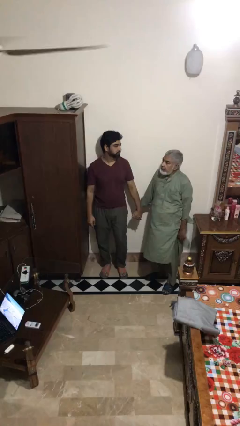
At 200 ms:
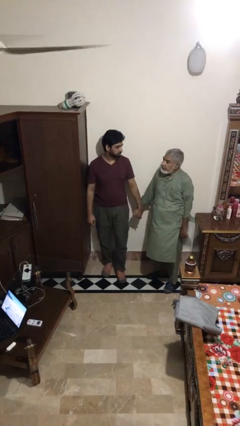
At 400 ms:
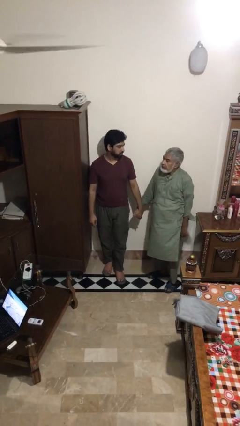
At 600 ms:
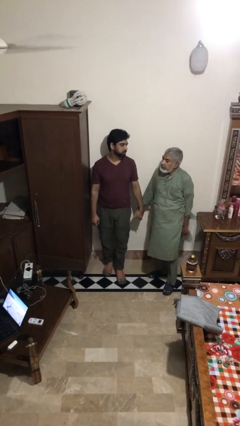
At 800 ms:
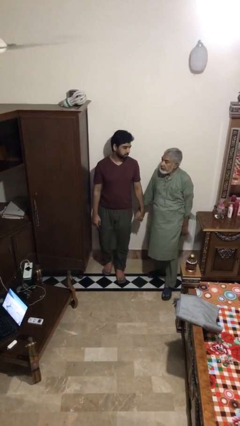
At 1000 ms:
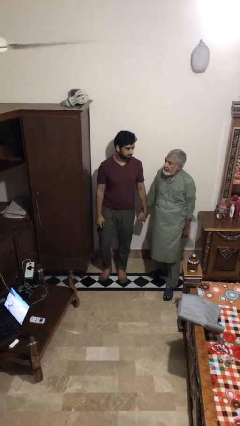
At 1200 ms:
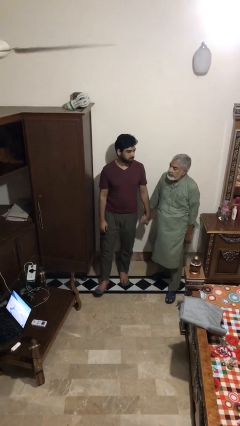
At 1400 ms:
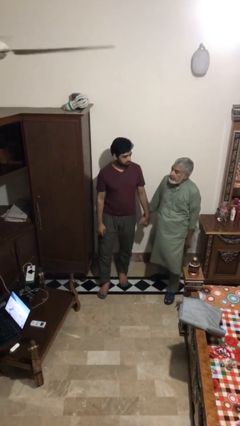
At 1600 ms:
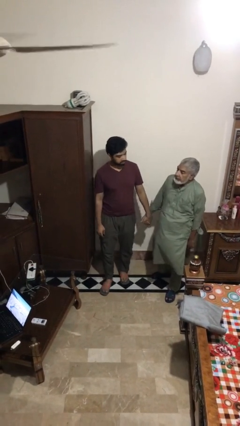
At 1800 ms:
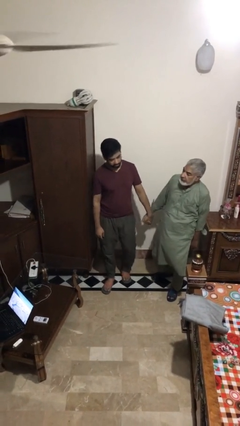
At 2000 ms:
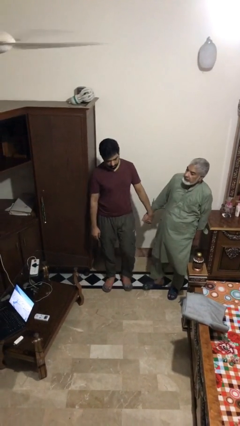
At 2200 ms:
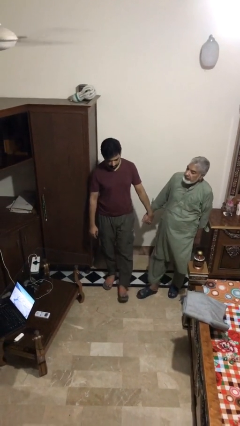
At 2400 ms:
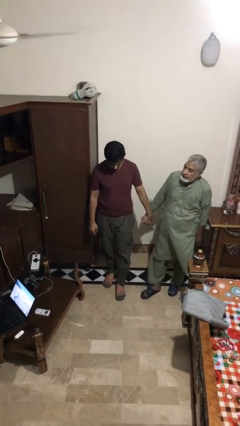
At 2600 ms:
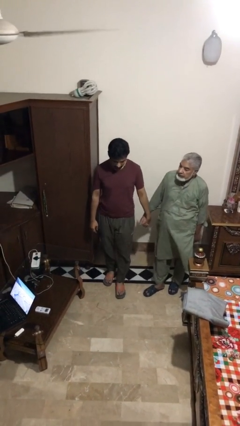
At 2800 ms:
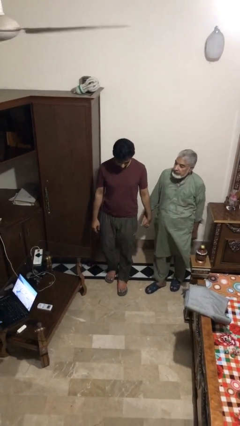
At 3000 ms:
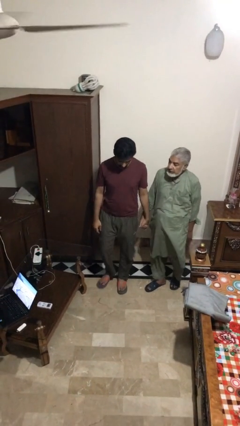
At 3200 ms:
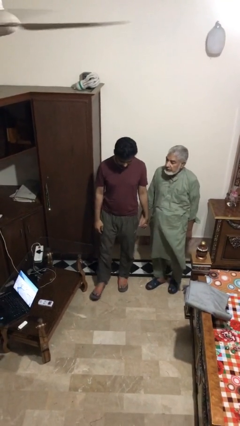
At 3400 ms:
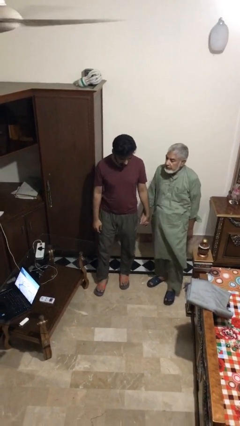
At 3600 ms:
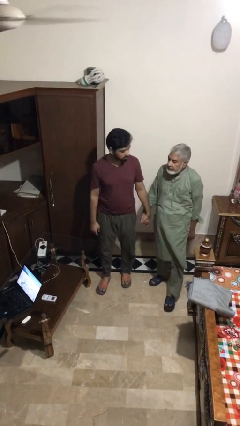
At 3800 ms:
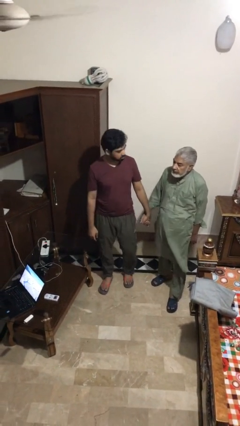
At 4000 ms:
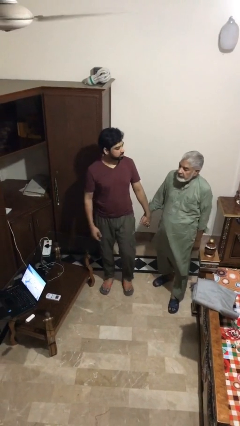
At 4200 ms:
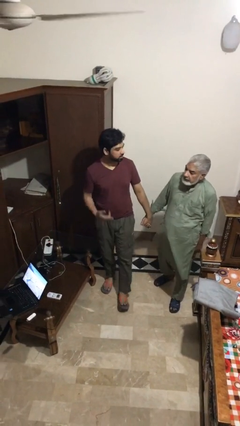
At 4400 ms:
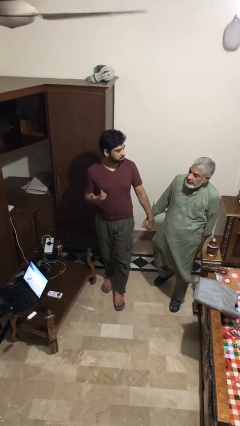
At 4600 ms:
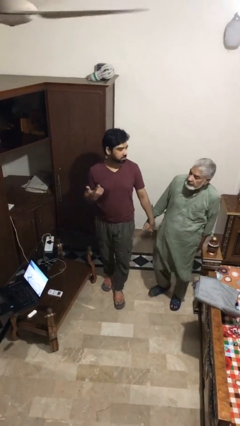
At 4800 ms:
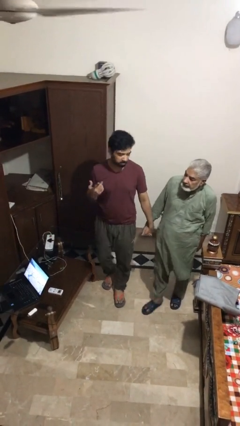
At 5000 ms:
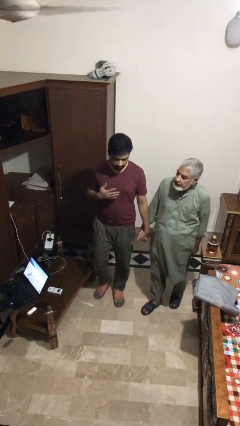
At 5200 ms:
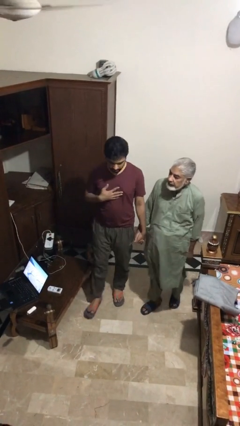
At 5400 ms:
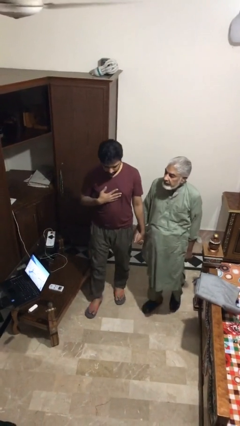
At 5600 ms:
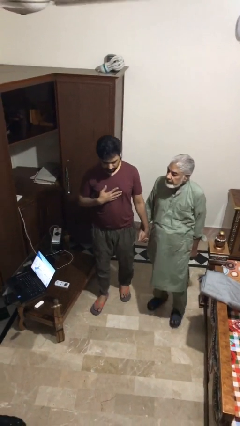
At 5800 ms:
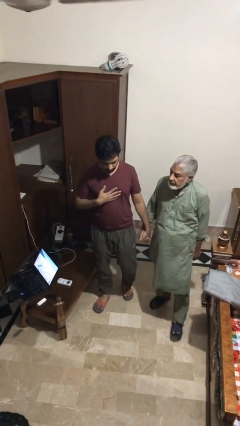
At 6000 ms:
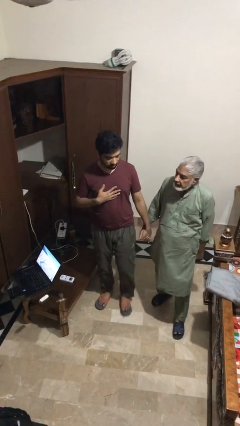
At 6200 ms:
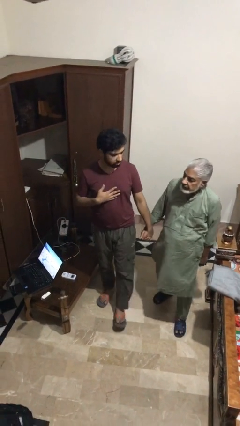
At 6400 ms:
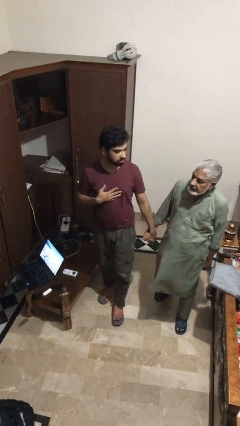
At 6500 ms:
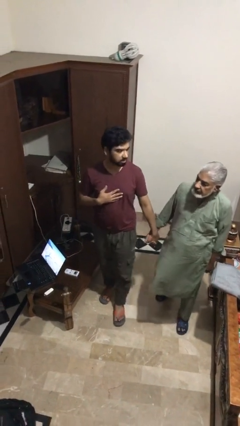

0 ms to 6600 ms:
person holds hand

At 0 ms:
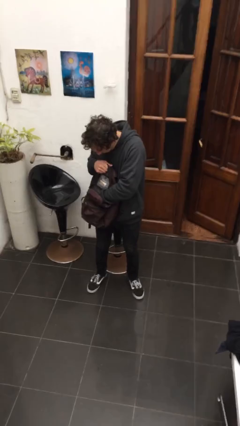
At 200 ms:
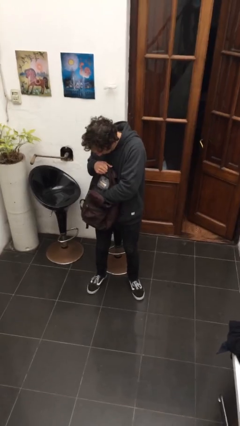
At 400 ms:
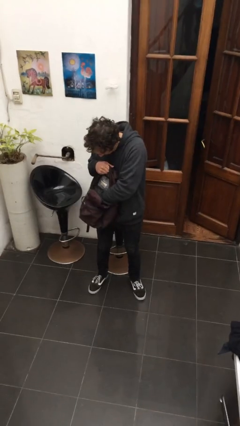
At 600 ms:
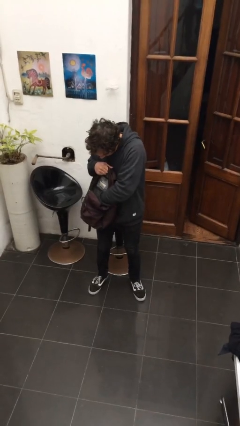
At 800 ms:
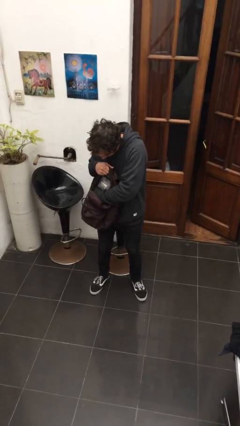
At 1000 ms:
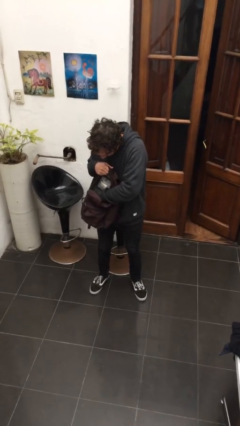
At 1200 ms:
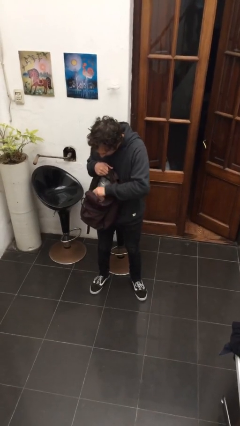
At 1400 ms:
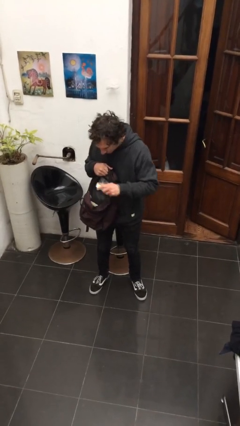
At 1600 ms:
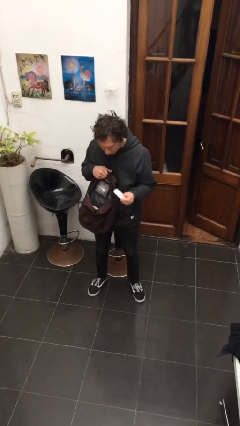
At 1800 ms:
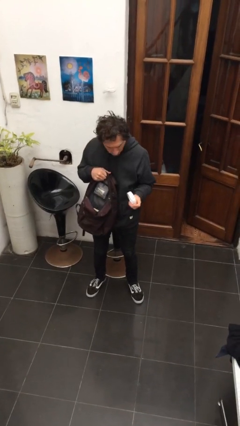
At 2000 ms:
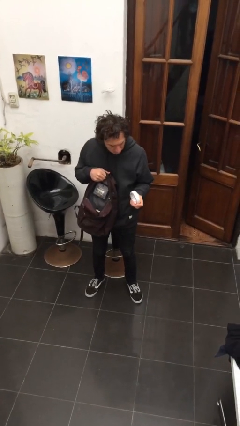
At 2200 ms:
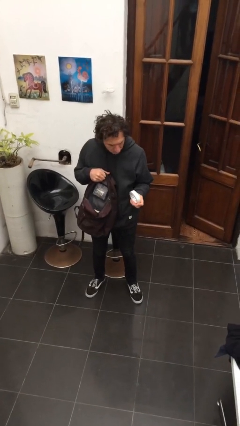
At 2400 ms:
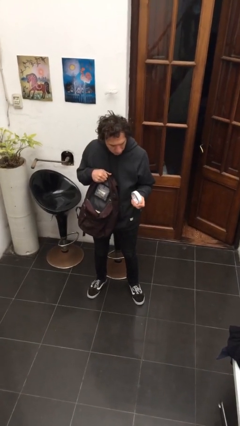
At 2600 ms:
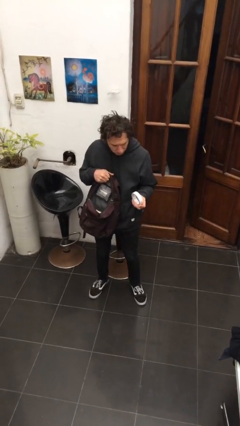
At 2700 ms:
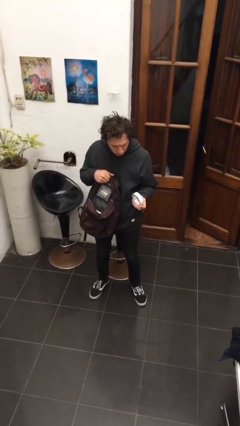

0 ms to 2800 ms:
person takes object from backpack

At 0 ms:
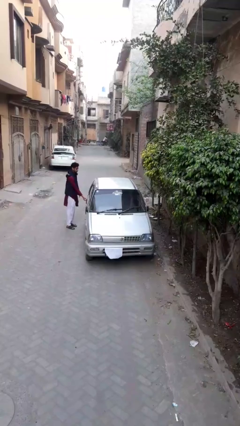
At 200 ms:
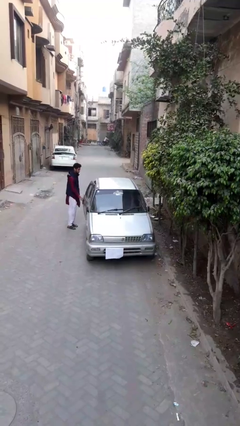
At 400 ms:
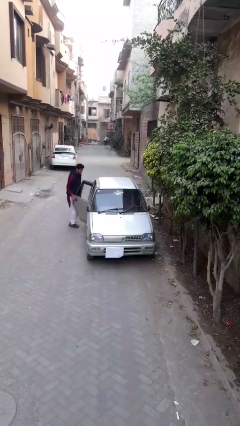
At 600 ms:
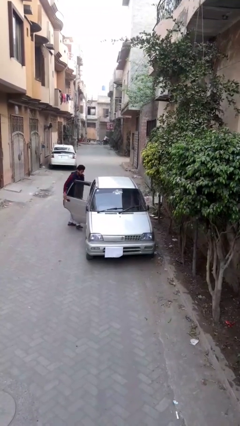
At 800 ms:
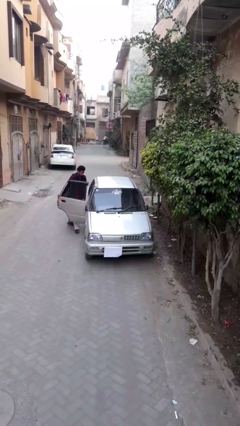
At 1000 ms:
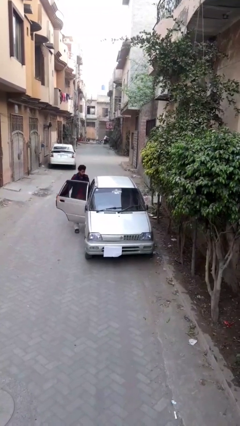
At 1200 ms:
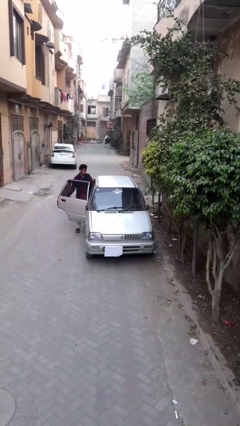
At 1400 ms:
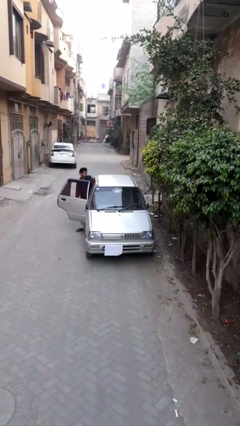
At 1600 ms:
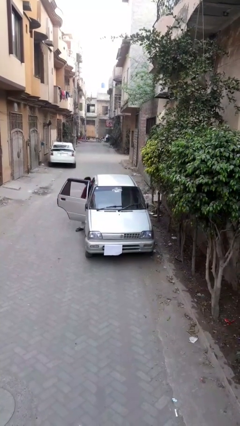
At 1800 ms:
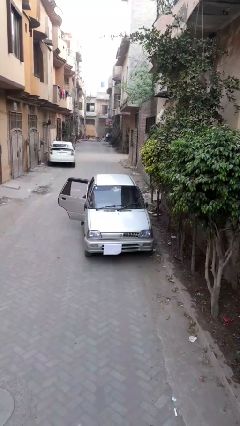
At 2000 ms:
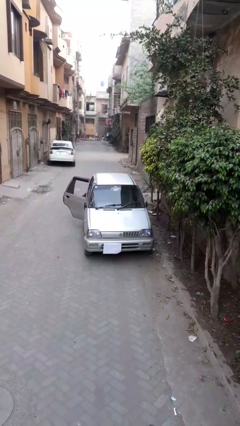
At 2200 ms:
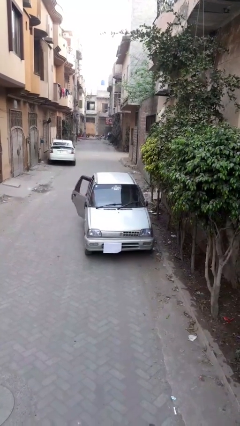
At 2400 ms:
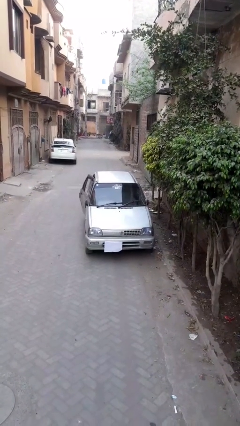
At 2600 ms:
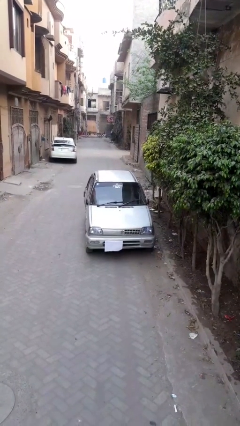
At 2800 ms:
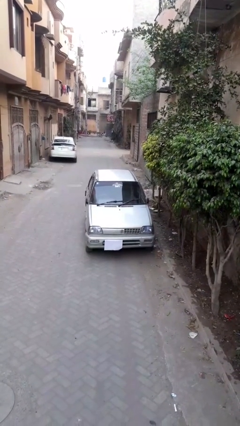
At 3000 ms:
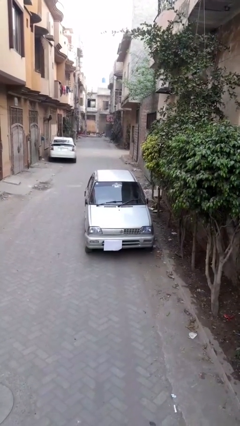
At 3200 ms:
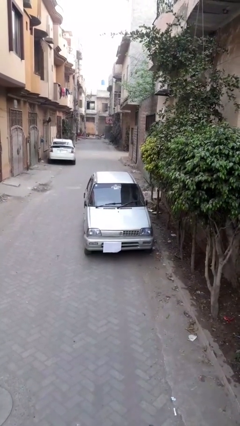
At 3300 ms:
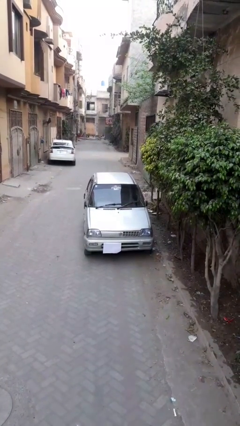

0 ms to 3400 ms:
car picks up person

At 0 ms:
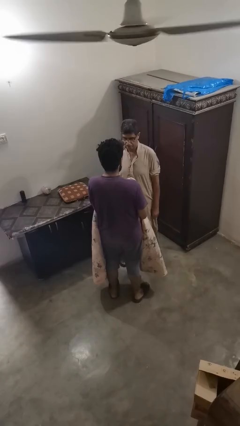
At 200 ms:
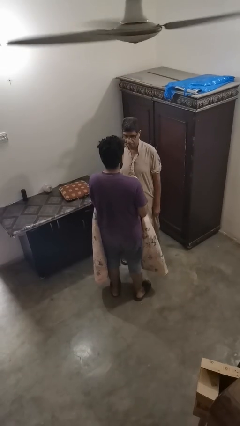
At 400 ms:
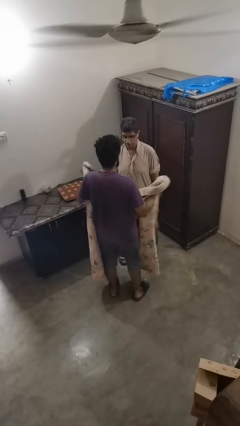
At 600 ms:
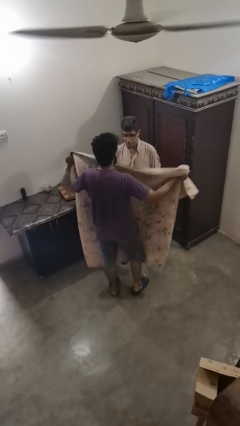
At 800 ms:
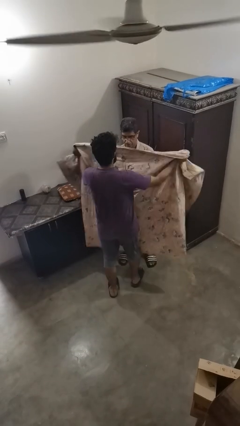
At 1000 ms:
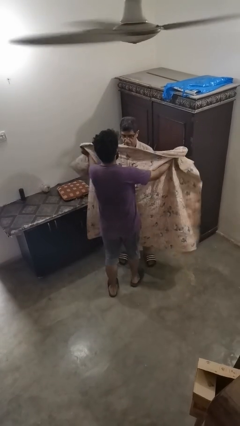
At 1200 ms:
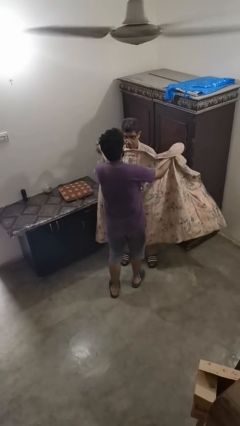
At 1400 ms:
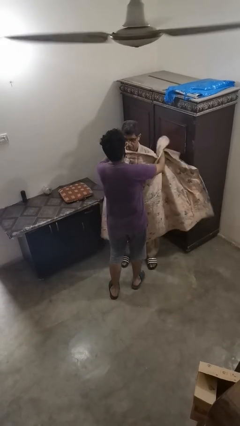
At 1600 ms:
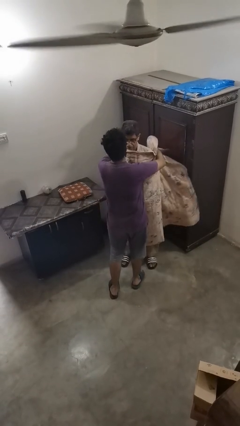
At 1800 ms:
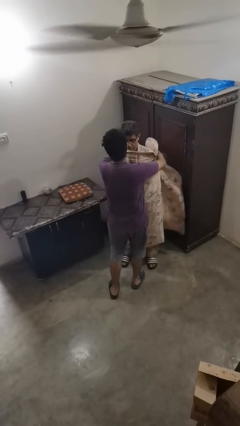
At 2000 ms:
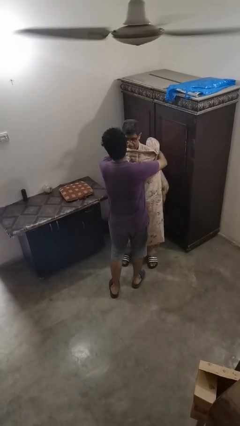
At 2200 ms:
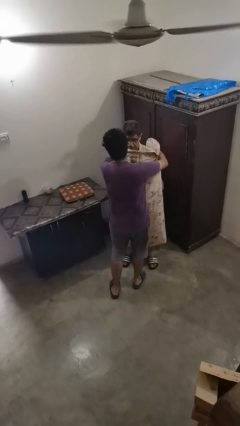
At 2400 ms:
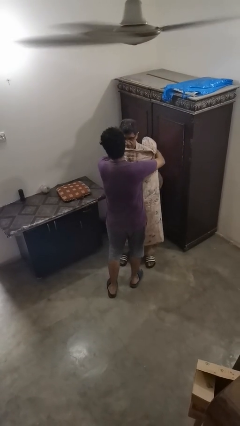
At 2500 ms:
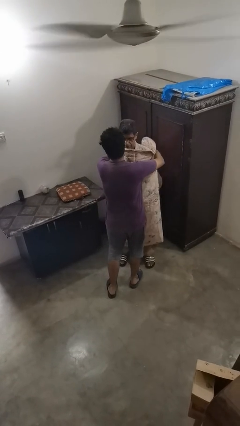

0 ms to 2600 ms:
person covers friend with blanket

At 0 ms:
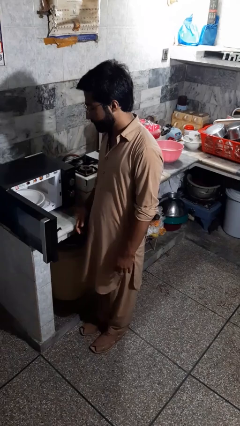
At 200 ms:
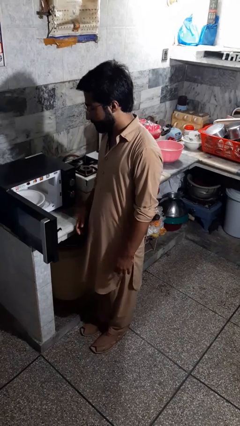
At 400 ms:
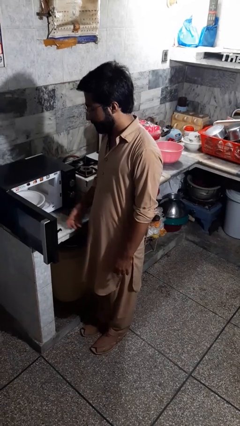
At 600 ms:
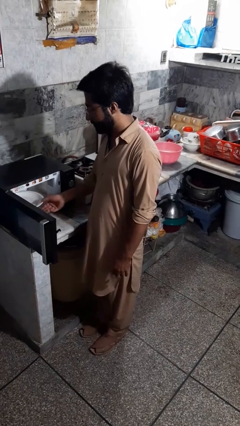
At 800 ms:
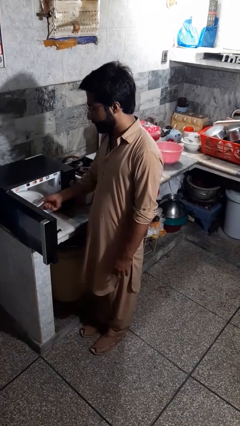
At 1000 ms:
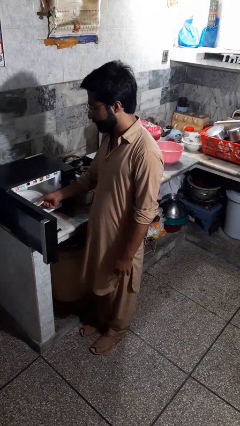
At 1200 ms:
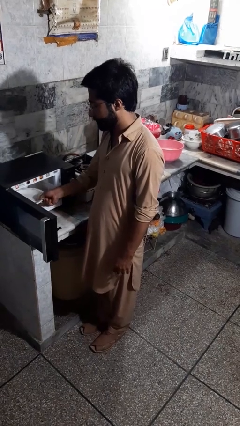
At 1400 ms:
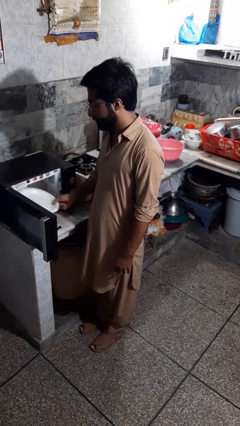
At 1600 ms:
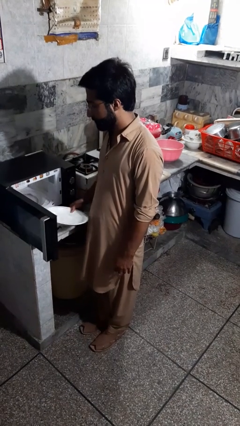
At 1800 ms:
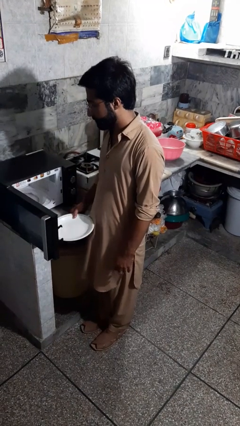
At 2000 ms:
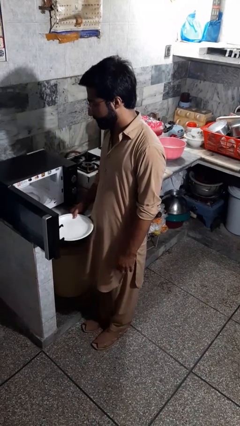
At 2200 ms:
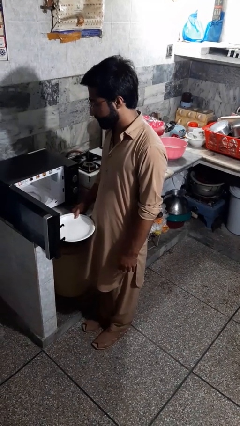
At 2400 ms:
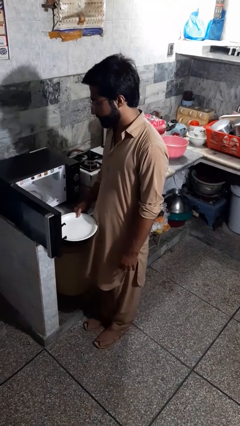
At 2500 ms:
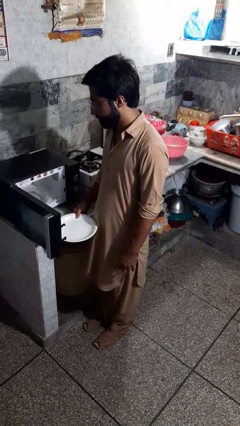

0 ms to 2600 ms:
person takes object from oven
